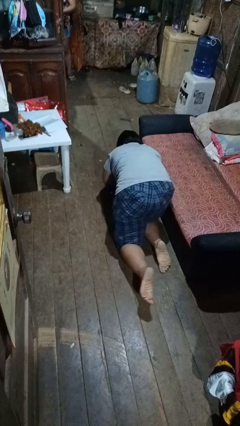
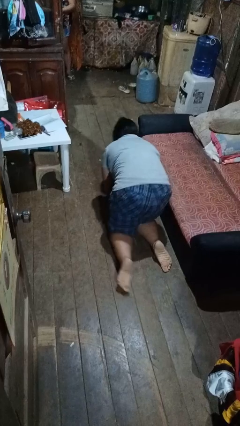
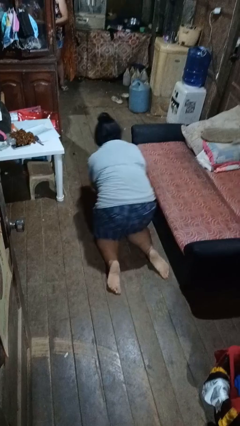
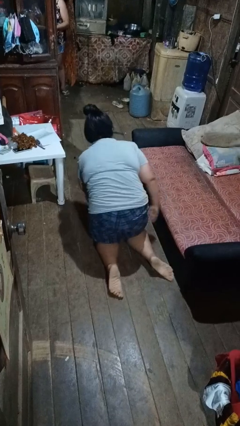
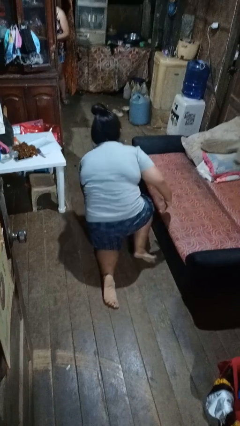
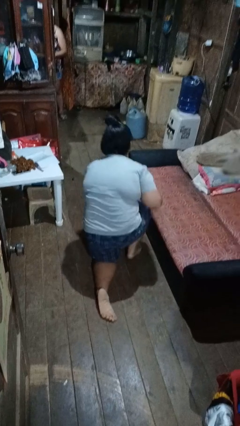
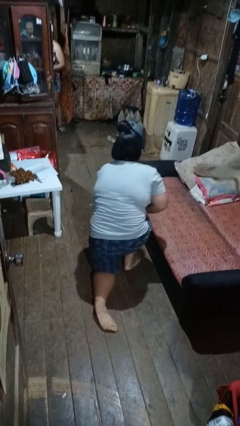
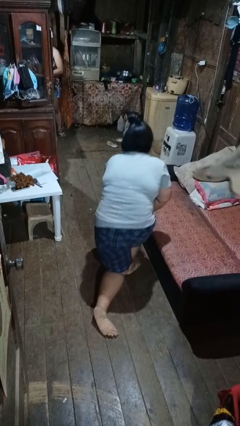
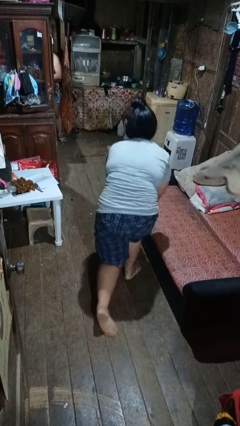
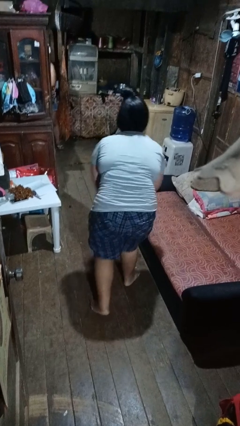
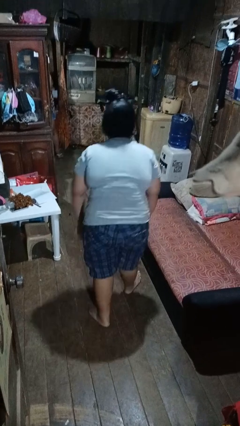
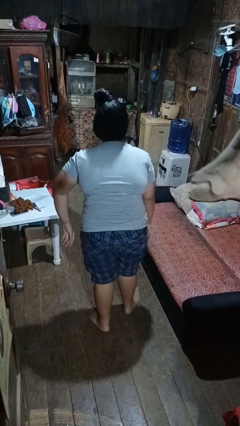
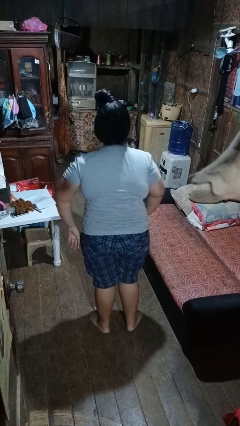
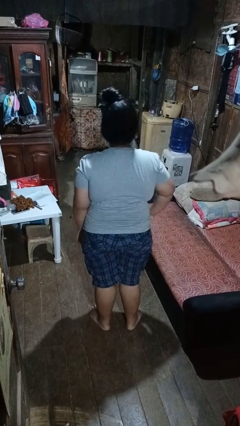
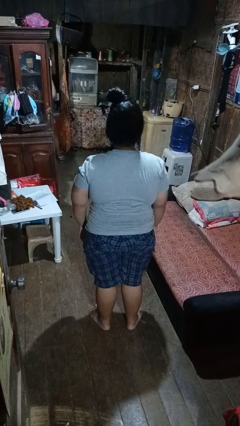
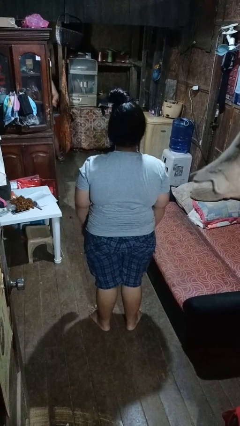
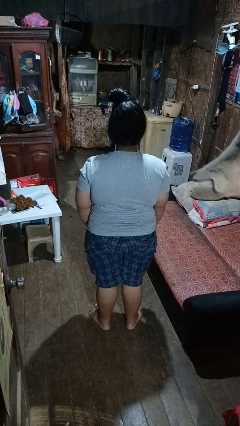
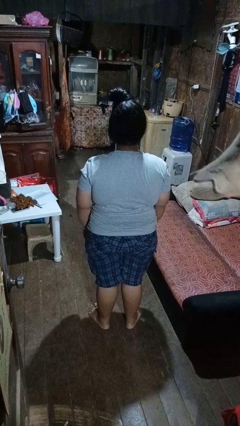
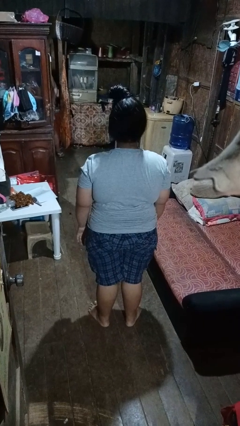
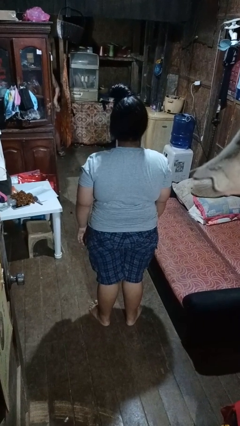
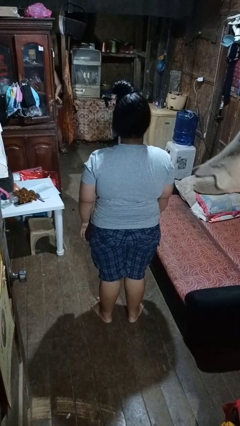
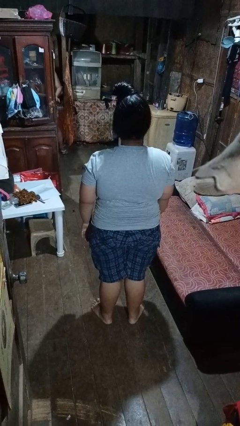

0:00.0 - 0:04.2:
person stands up from floor

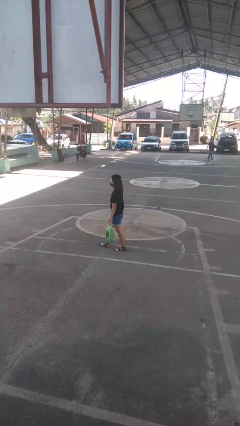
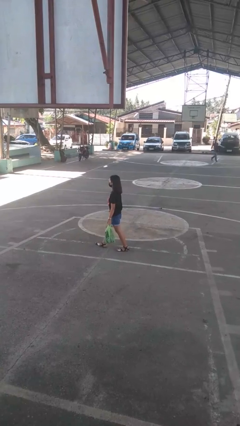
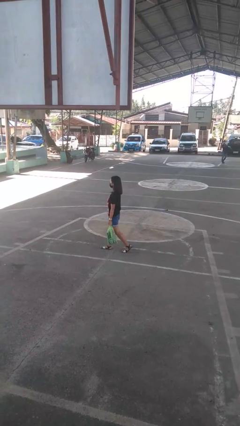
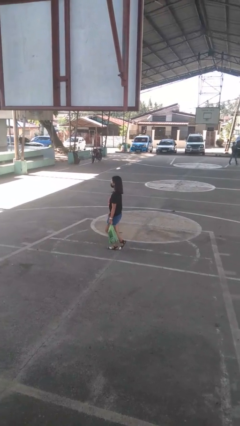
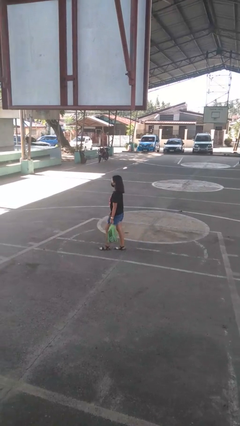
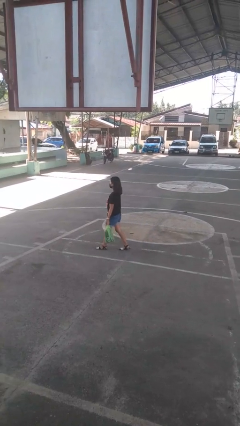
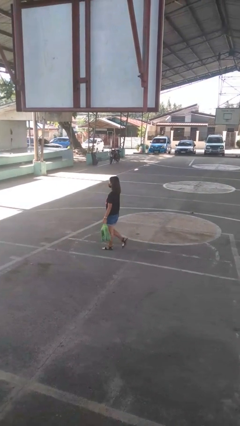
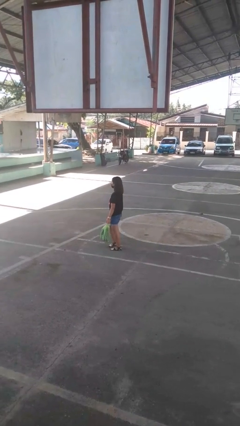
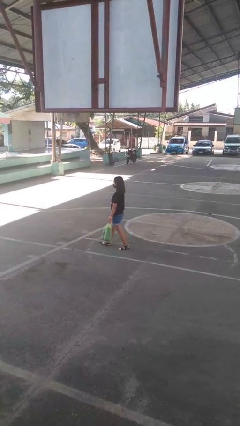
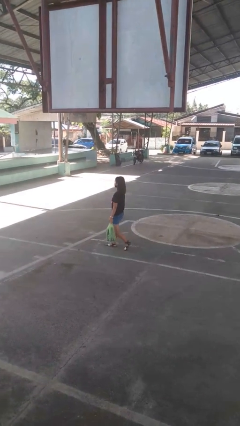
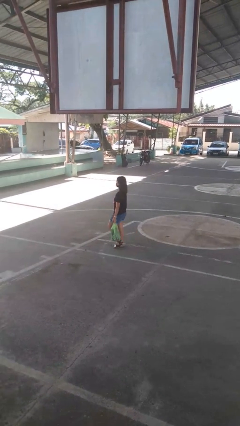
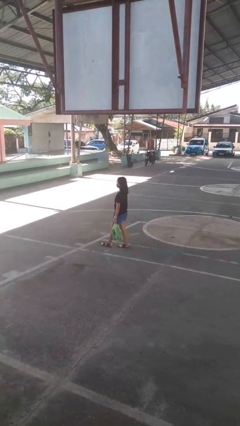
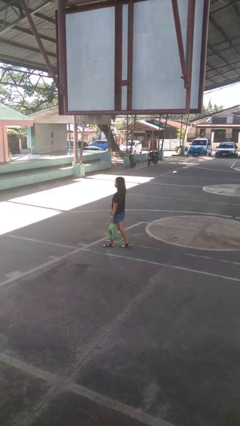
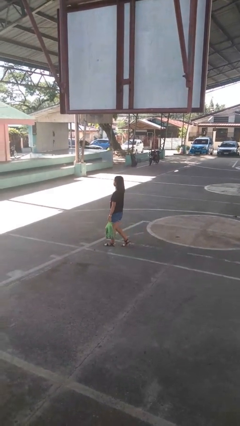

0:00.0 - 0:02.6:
person carries groceries

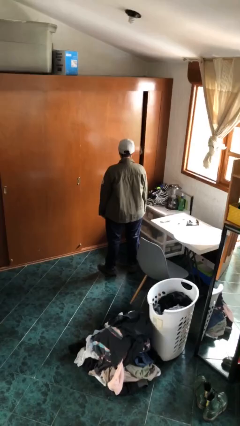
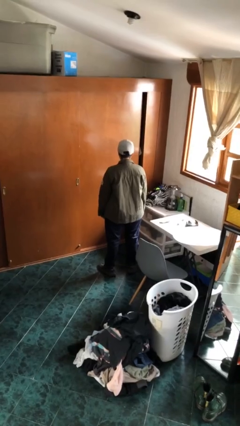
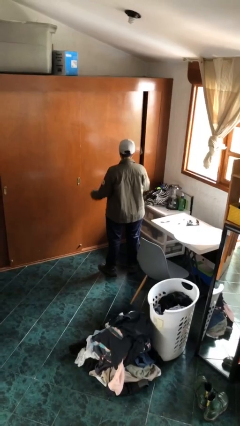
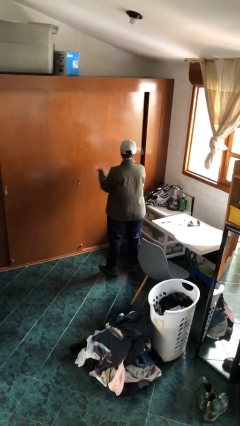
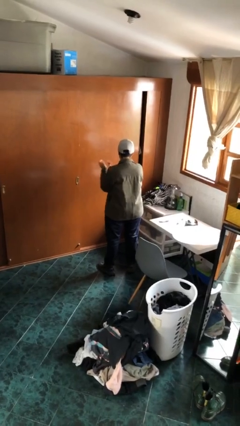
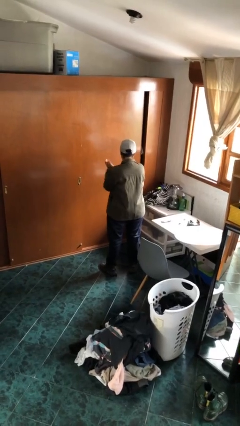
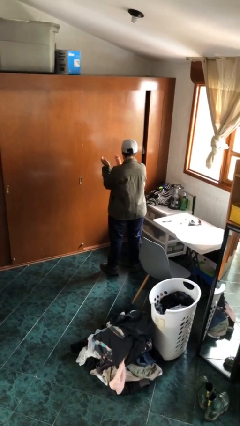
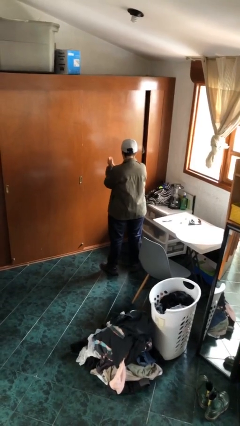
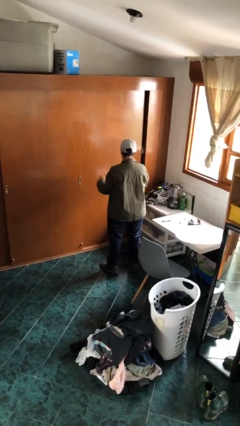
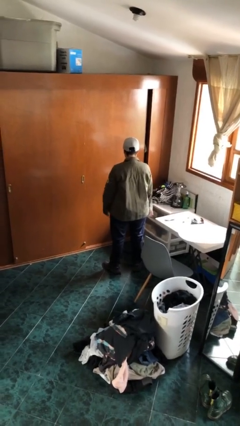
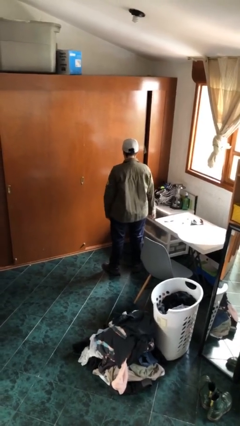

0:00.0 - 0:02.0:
person claps hands

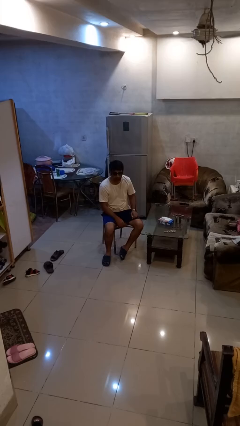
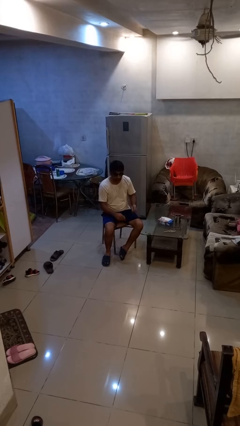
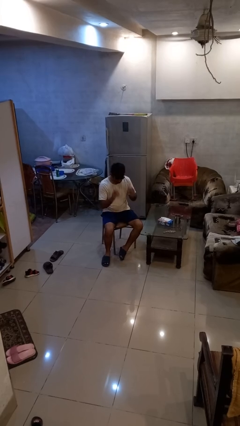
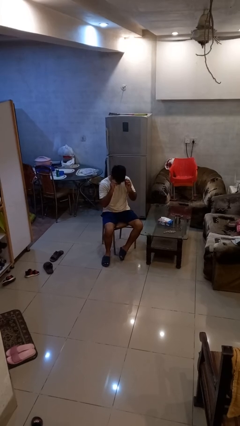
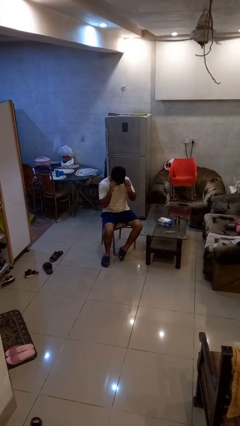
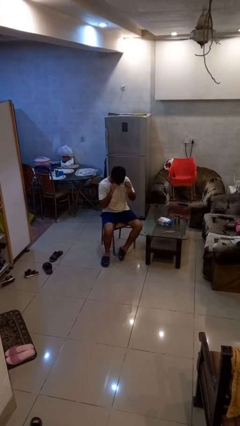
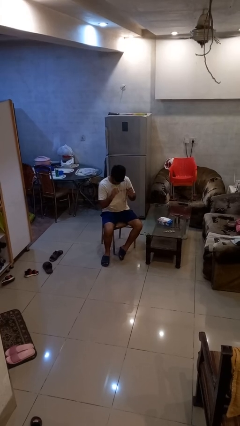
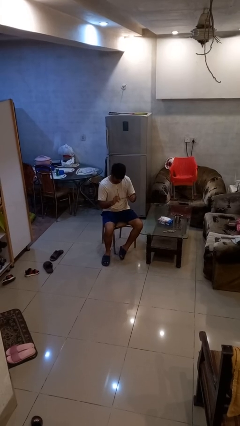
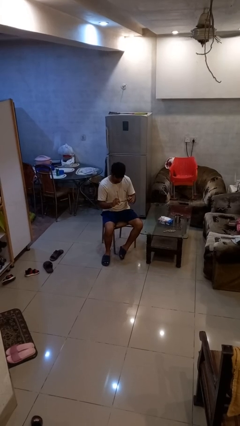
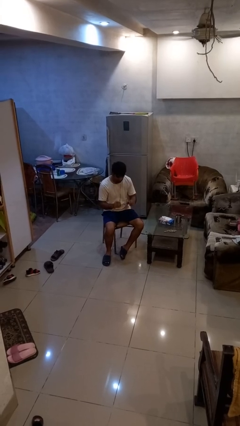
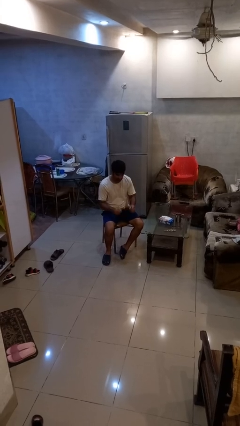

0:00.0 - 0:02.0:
person takes off sunglasses

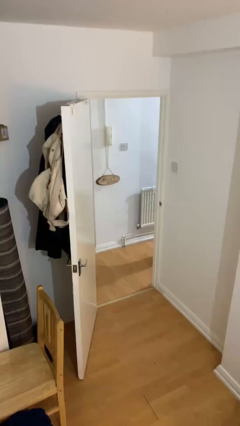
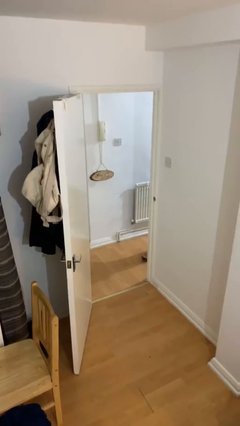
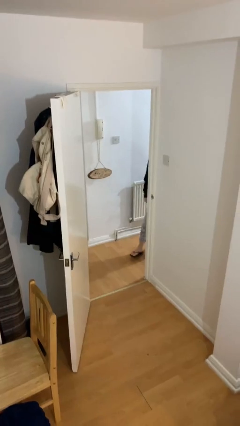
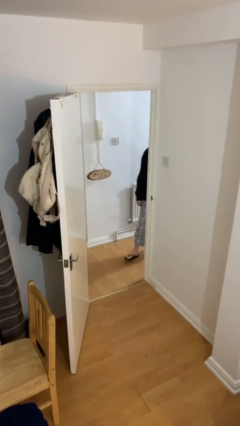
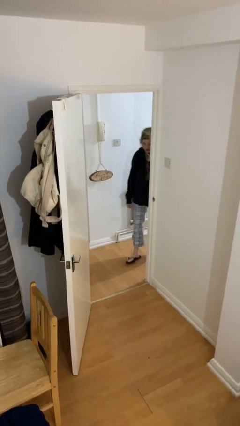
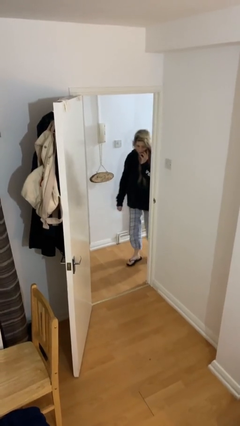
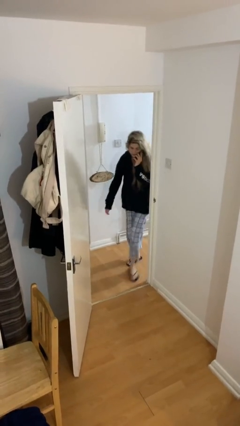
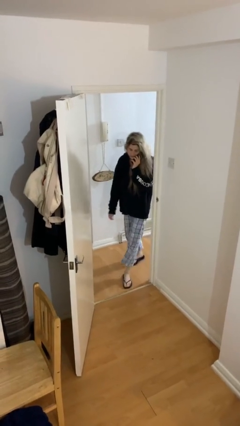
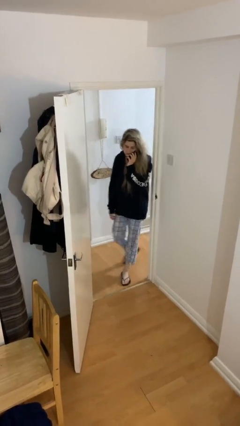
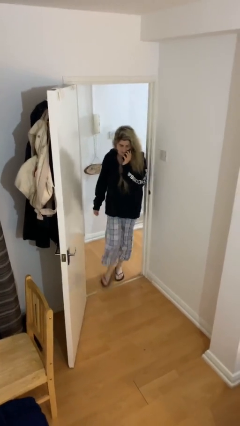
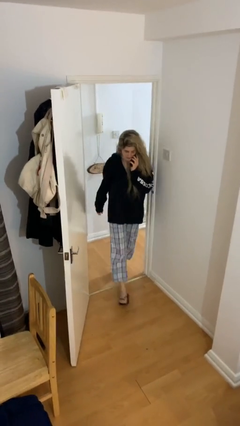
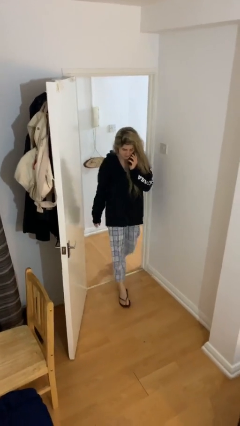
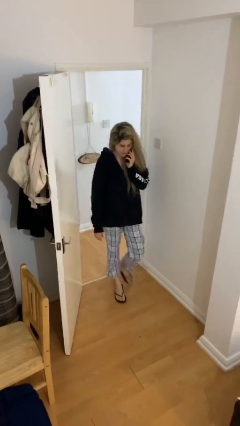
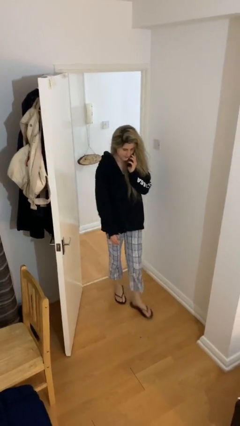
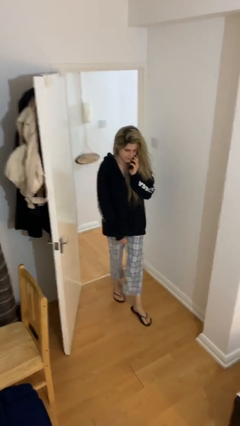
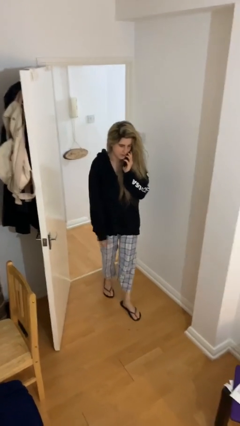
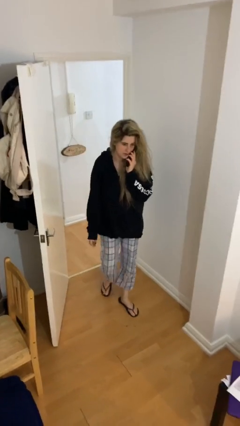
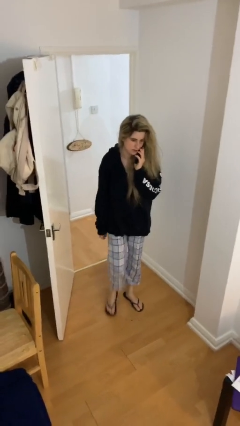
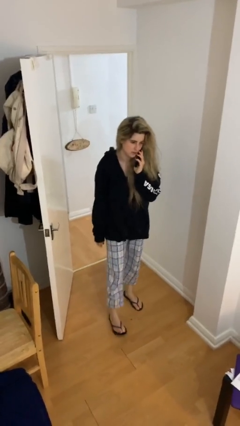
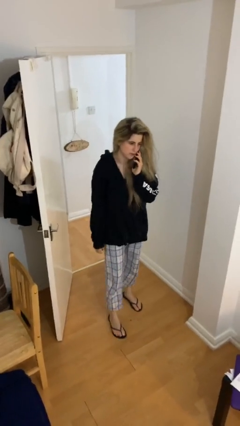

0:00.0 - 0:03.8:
person enters scene through structure

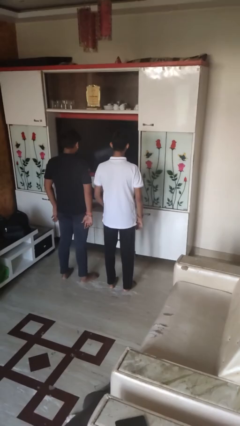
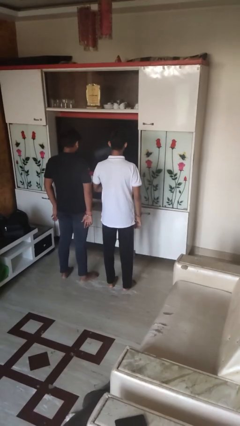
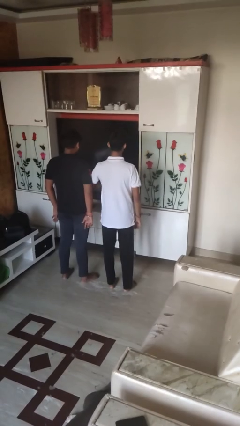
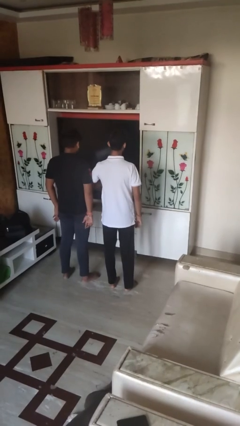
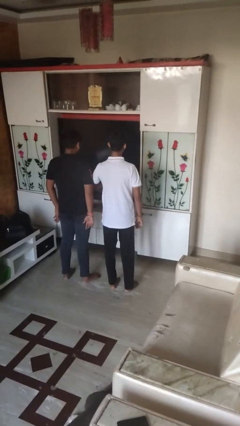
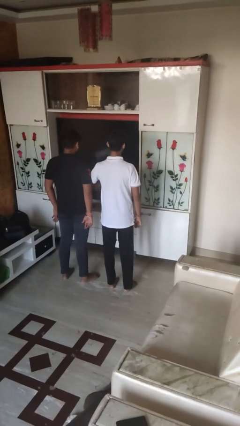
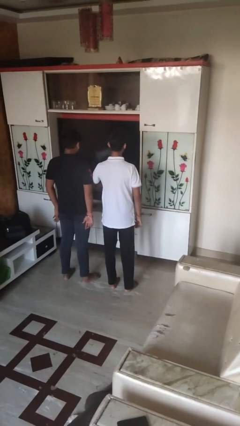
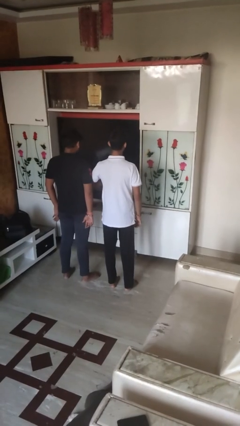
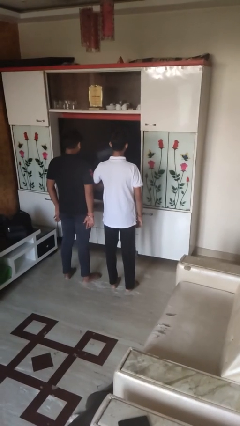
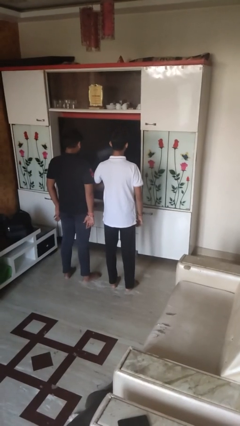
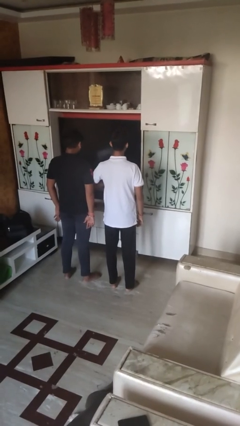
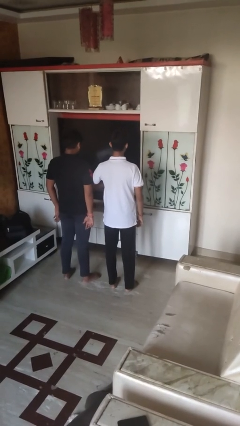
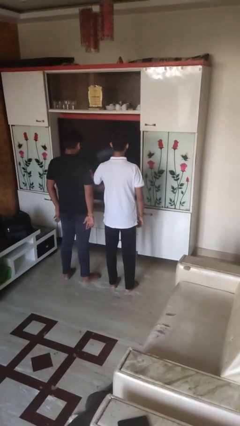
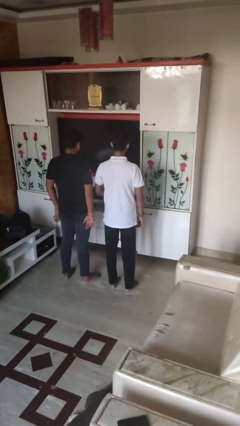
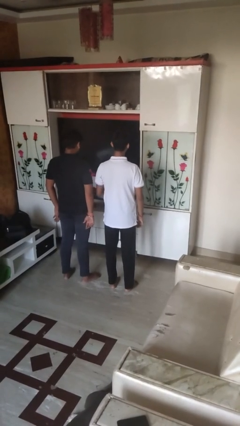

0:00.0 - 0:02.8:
person nudges person with elbow
